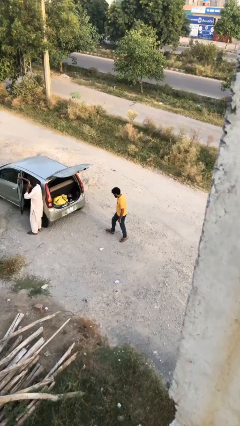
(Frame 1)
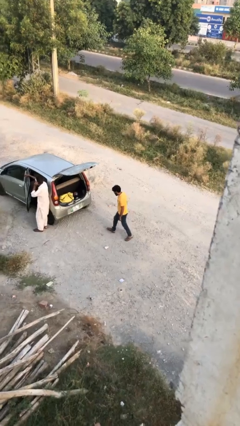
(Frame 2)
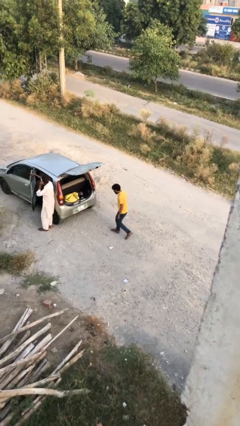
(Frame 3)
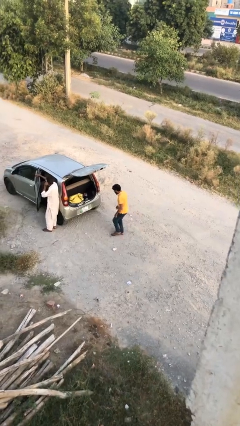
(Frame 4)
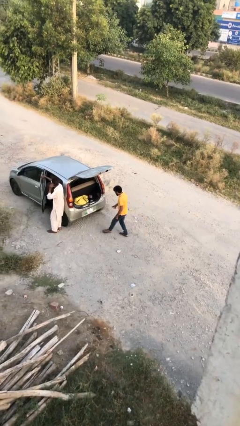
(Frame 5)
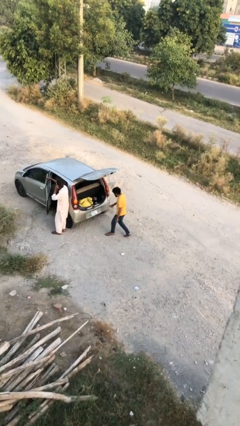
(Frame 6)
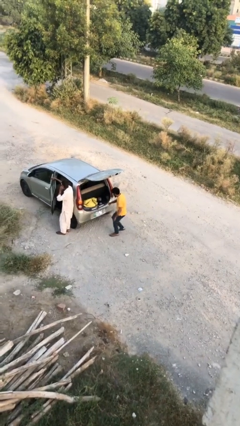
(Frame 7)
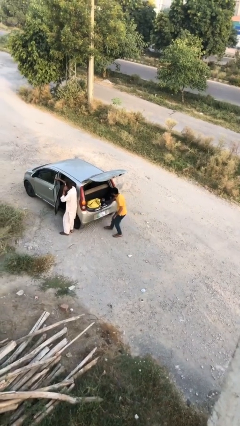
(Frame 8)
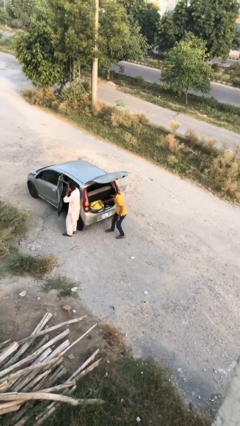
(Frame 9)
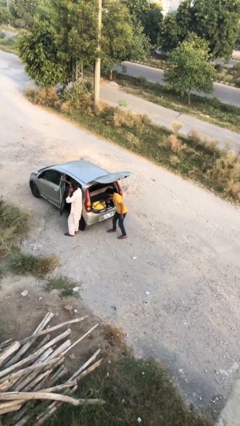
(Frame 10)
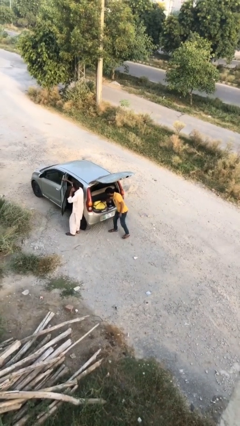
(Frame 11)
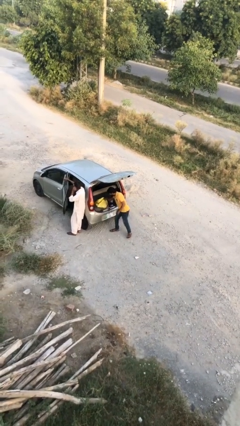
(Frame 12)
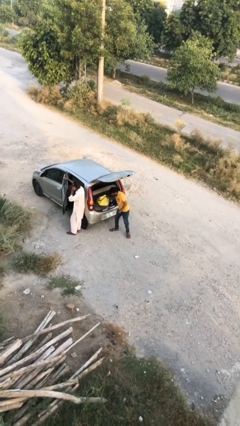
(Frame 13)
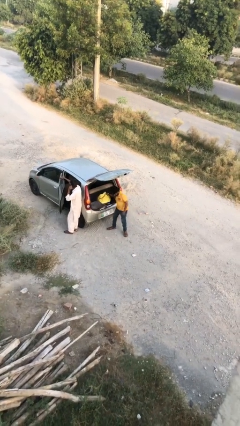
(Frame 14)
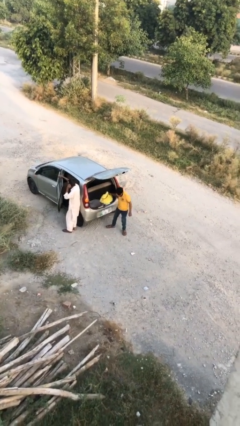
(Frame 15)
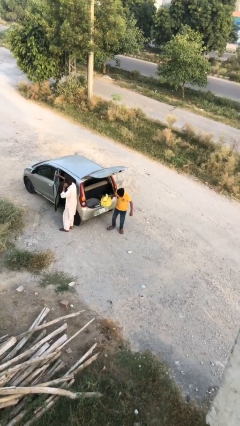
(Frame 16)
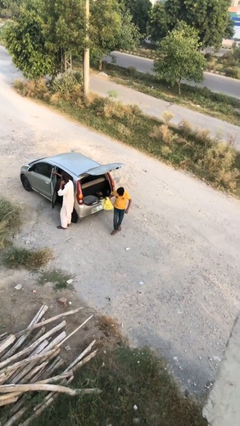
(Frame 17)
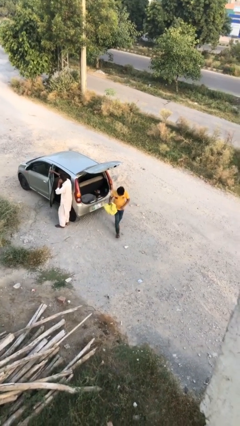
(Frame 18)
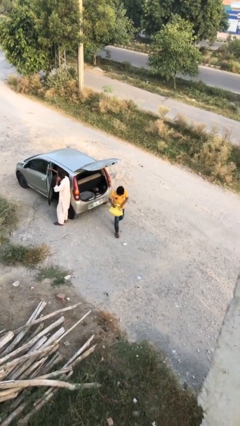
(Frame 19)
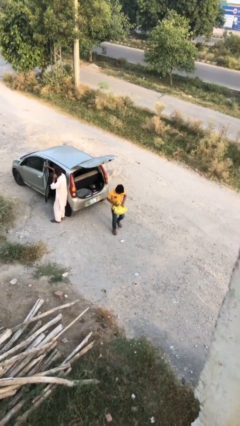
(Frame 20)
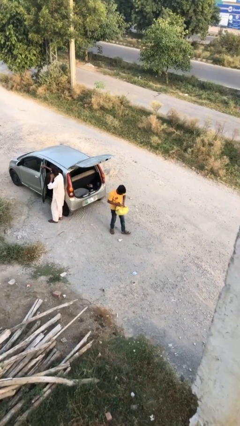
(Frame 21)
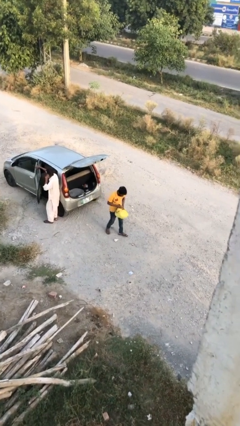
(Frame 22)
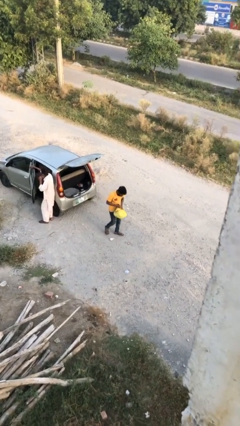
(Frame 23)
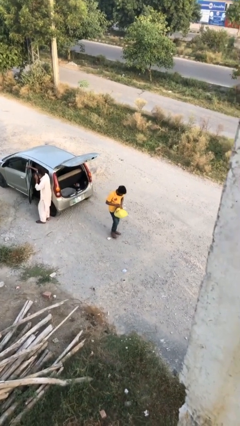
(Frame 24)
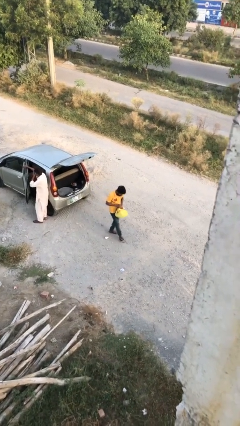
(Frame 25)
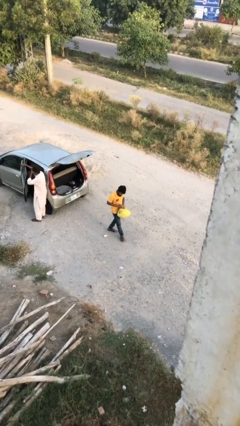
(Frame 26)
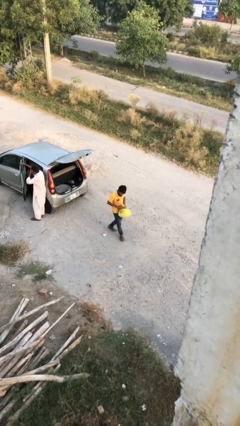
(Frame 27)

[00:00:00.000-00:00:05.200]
person steals object from person

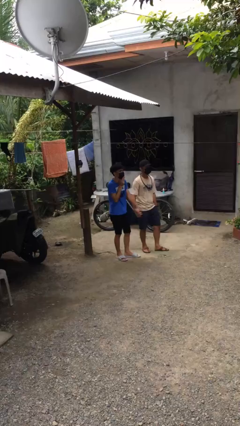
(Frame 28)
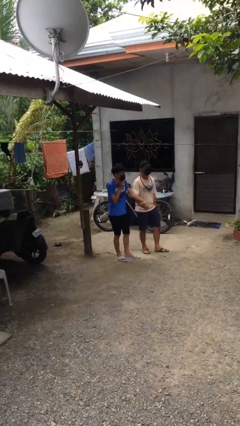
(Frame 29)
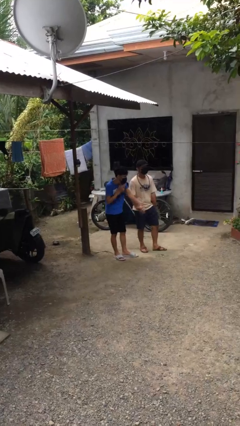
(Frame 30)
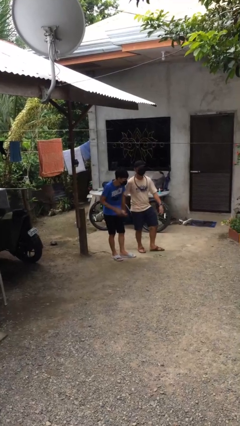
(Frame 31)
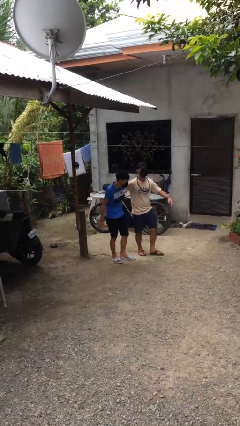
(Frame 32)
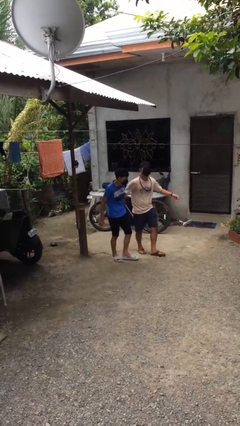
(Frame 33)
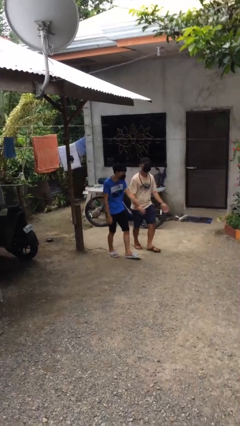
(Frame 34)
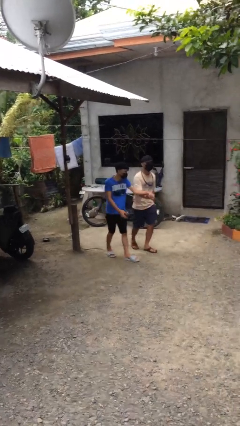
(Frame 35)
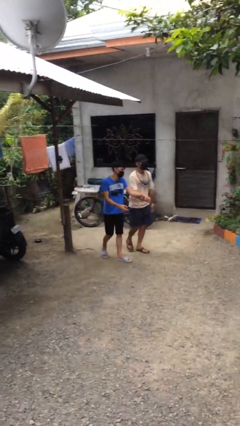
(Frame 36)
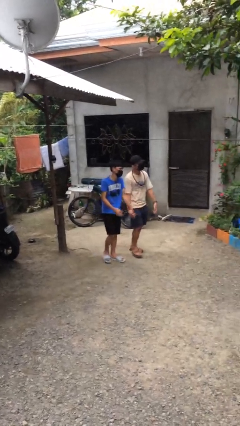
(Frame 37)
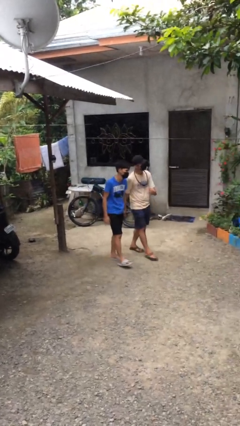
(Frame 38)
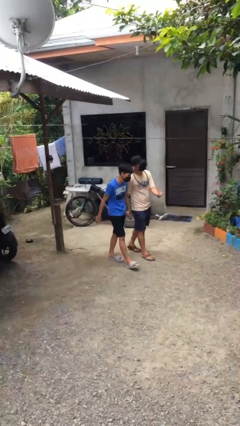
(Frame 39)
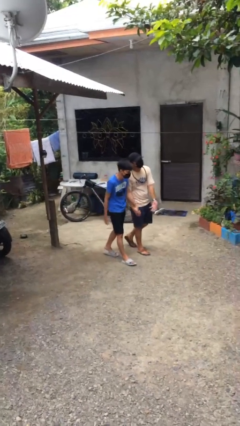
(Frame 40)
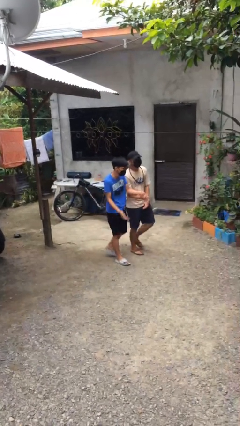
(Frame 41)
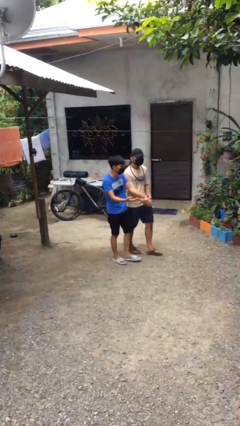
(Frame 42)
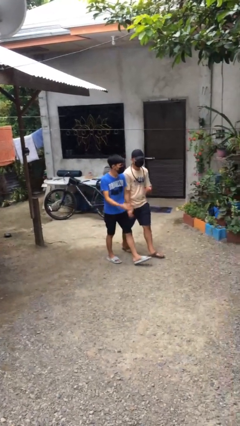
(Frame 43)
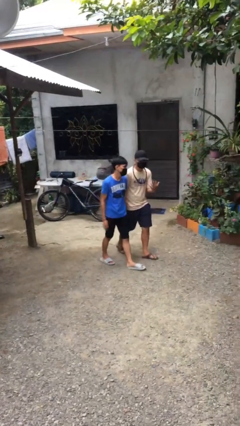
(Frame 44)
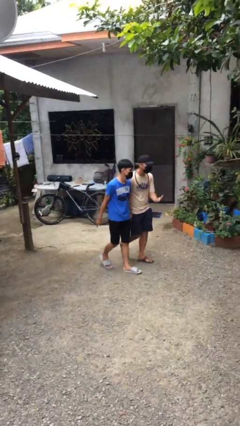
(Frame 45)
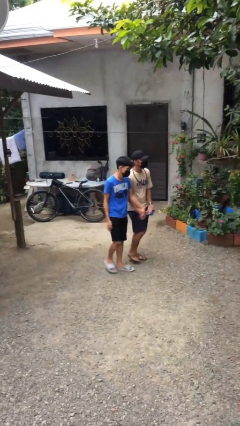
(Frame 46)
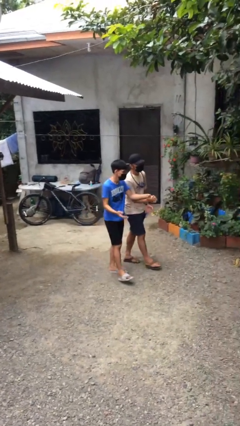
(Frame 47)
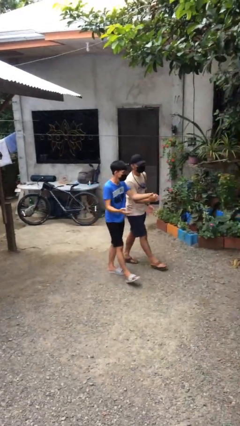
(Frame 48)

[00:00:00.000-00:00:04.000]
person holds hand

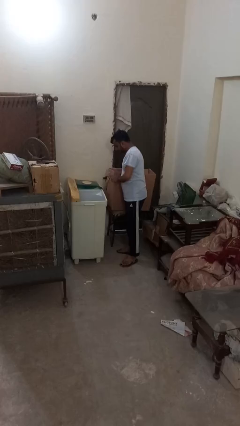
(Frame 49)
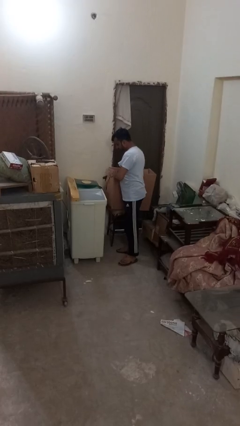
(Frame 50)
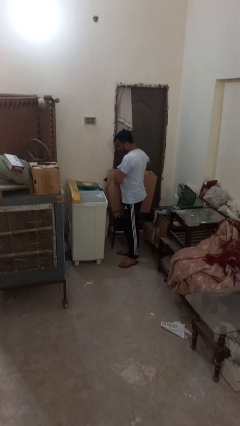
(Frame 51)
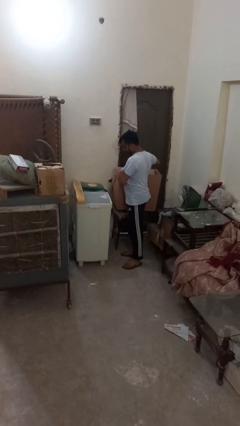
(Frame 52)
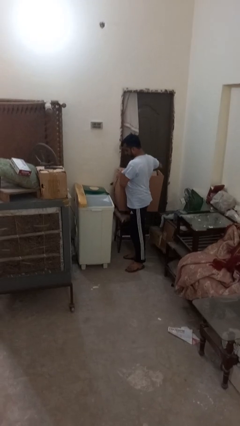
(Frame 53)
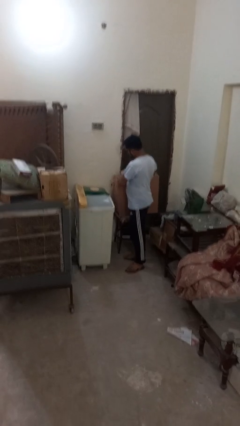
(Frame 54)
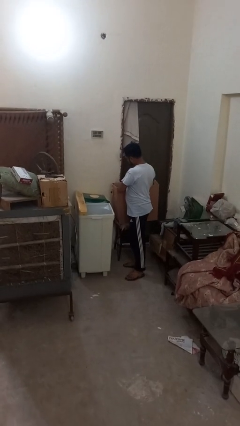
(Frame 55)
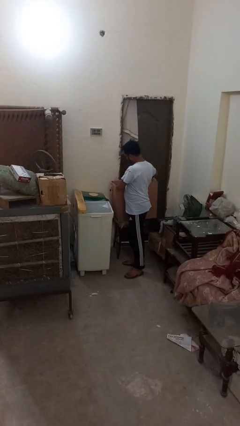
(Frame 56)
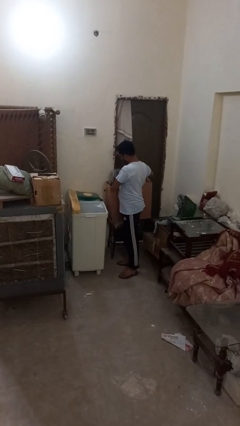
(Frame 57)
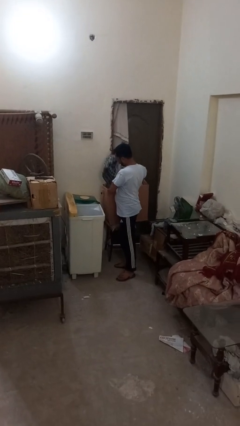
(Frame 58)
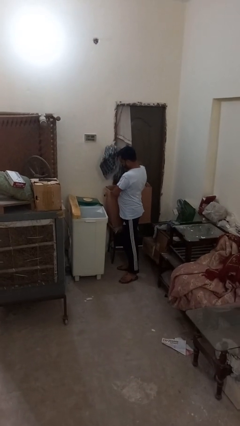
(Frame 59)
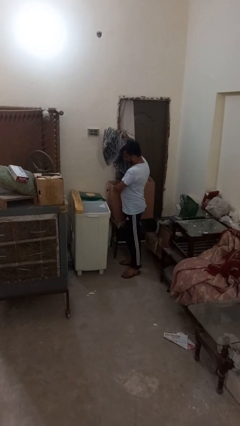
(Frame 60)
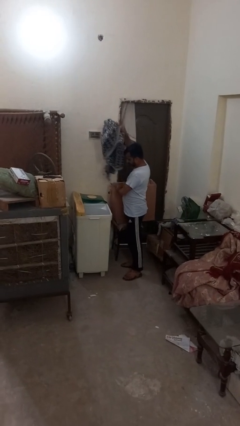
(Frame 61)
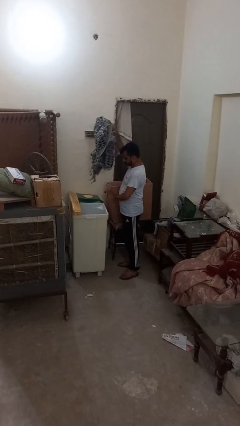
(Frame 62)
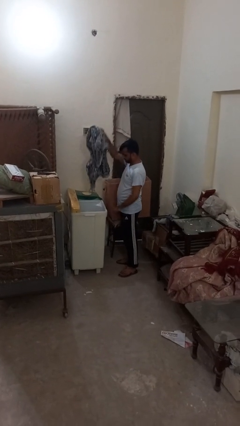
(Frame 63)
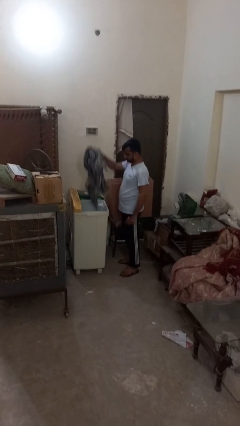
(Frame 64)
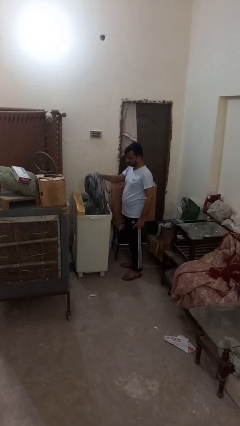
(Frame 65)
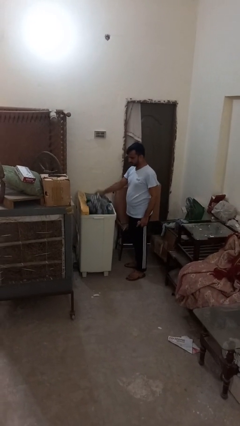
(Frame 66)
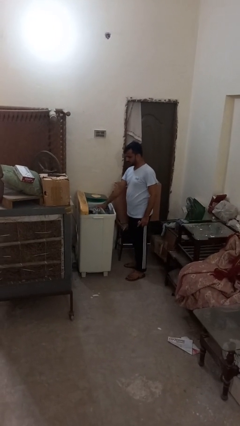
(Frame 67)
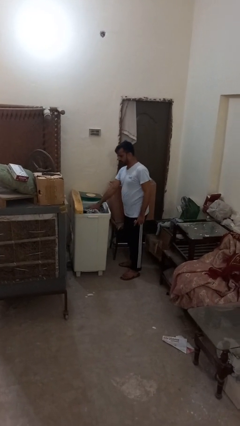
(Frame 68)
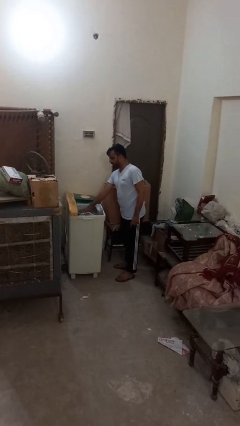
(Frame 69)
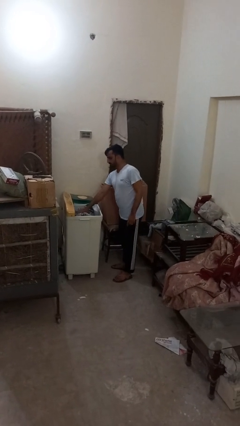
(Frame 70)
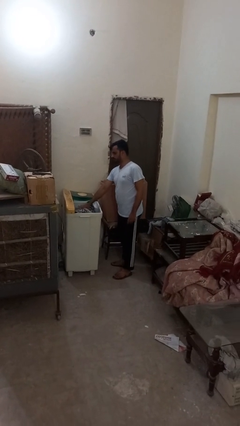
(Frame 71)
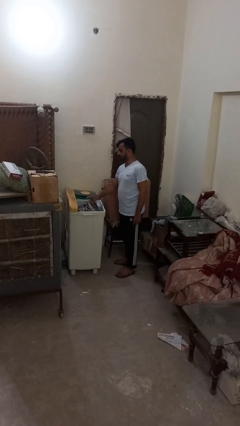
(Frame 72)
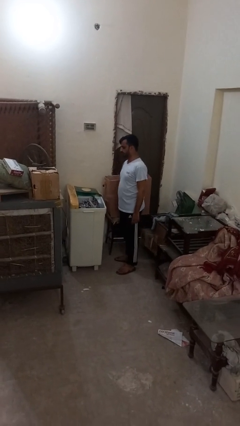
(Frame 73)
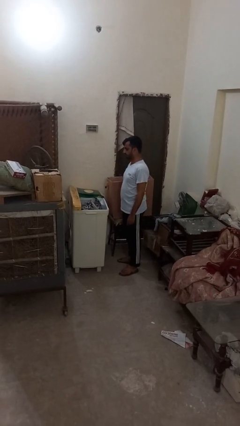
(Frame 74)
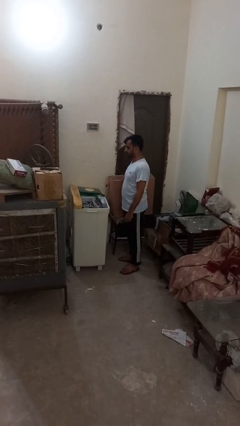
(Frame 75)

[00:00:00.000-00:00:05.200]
person loads dryer

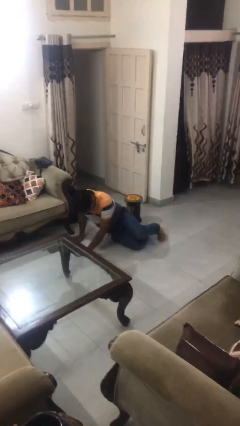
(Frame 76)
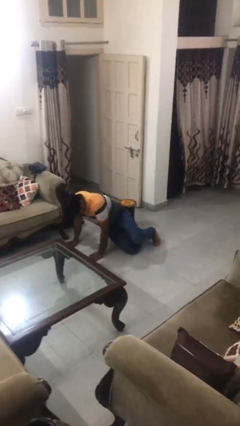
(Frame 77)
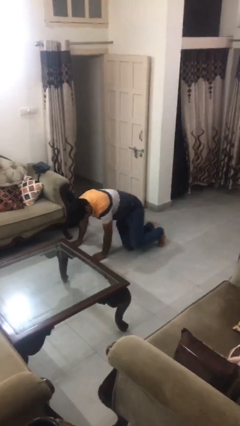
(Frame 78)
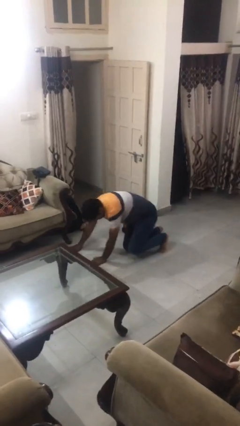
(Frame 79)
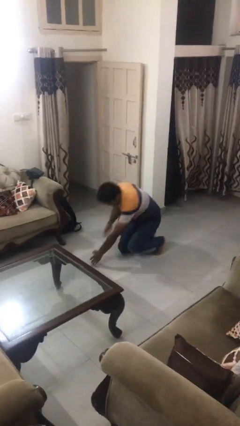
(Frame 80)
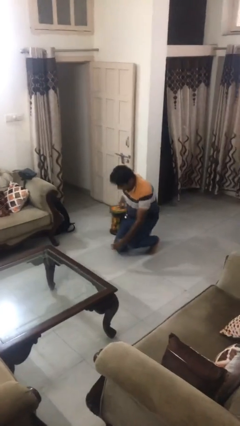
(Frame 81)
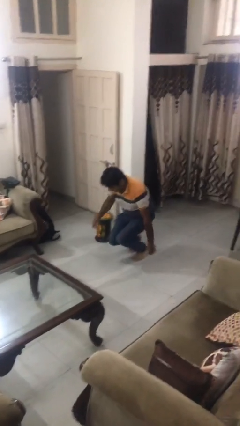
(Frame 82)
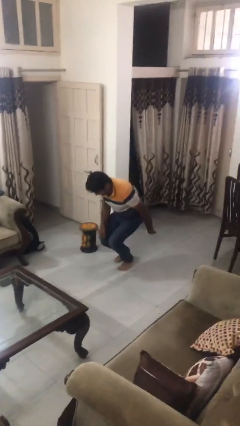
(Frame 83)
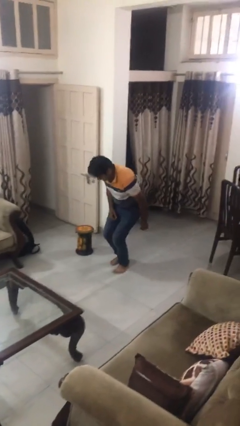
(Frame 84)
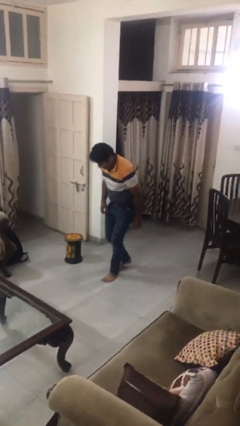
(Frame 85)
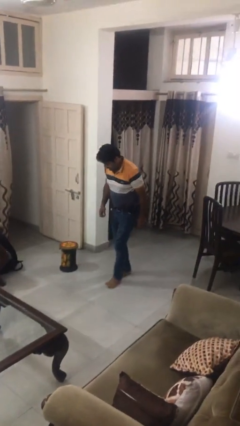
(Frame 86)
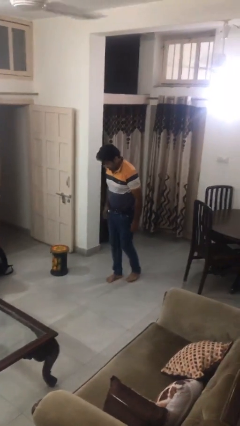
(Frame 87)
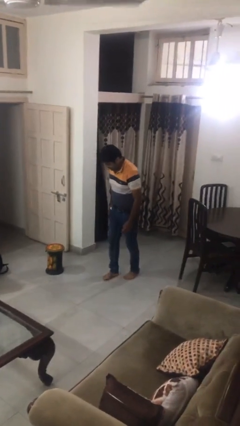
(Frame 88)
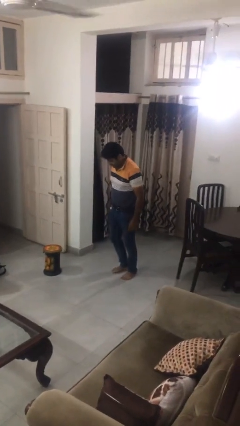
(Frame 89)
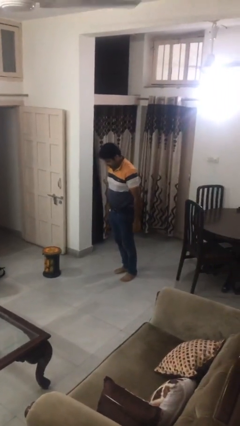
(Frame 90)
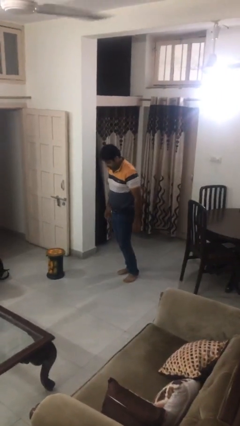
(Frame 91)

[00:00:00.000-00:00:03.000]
person stands up from floor

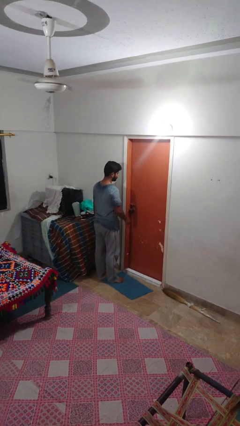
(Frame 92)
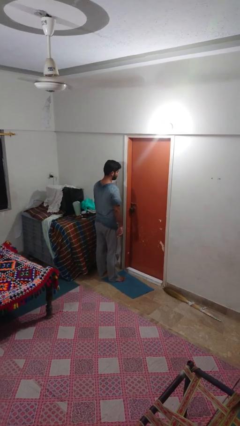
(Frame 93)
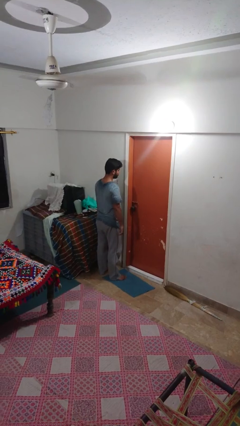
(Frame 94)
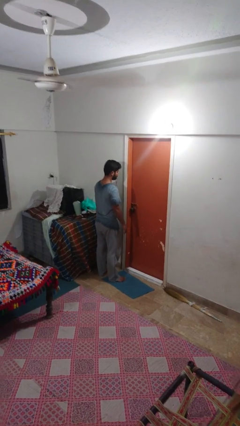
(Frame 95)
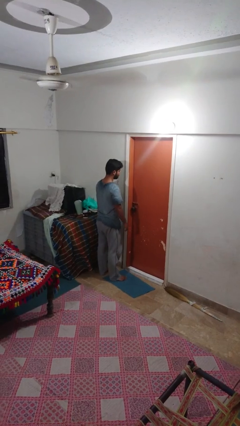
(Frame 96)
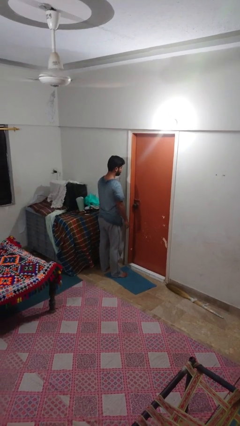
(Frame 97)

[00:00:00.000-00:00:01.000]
person locks door with keys
